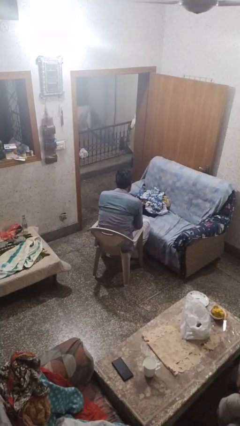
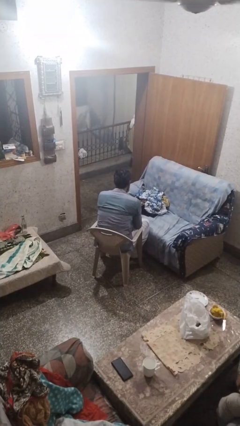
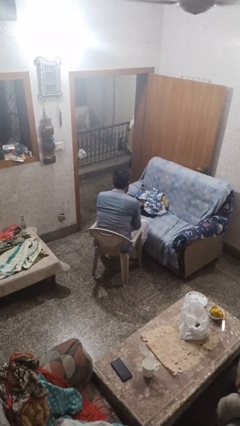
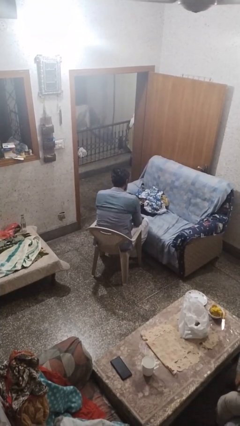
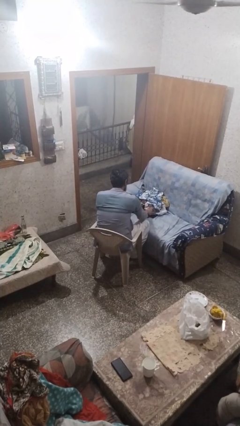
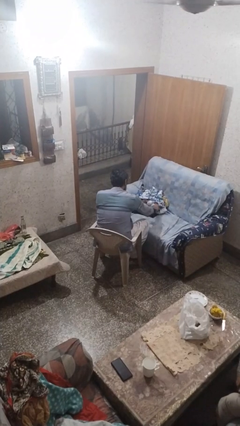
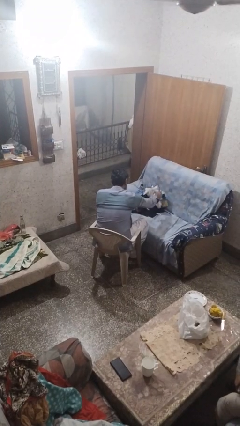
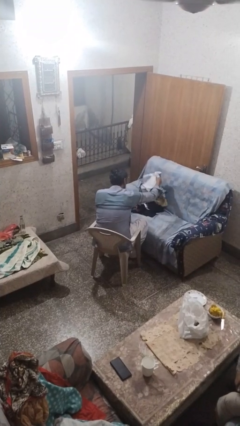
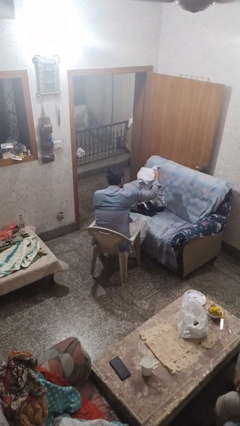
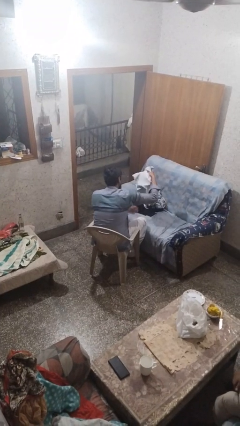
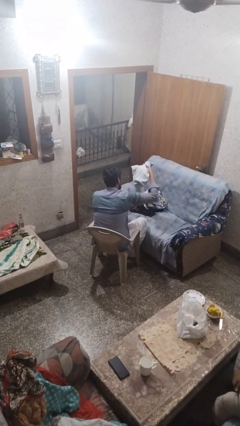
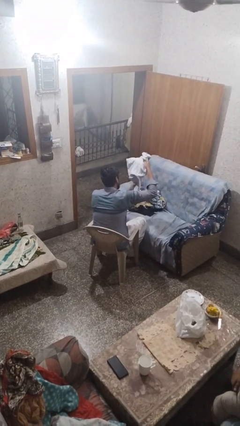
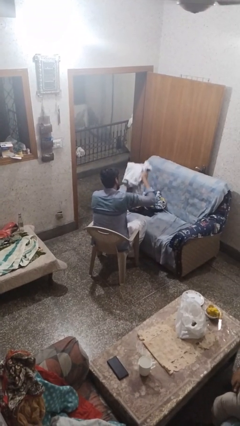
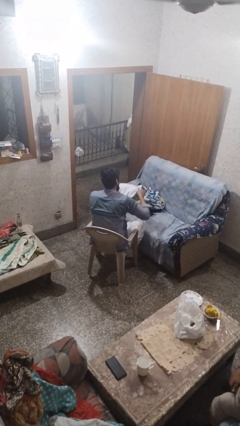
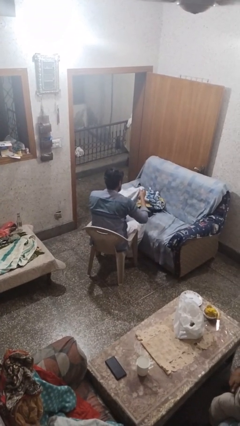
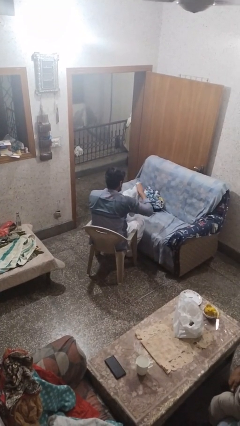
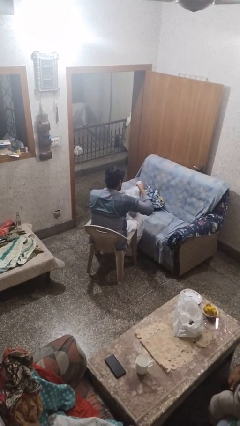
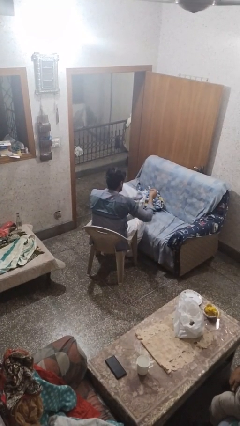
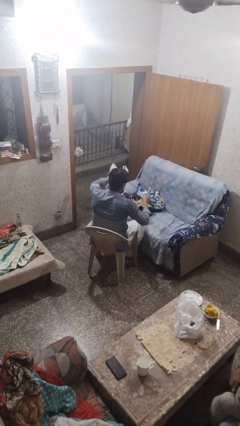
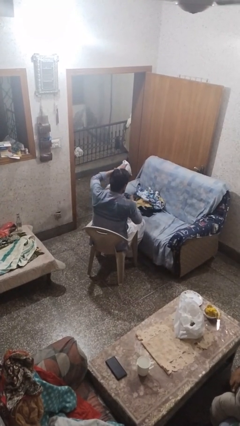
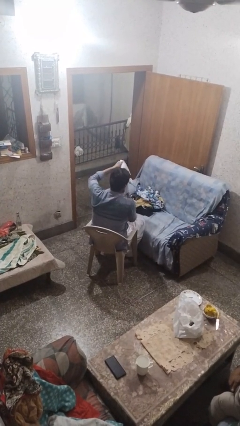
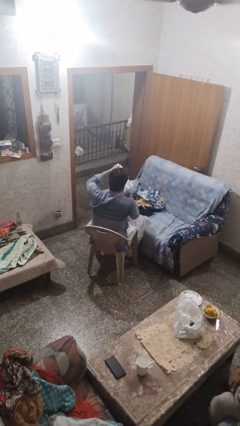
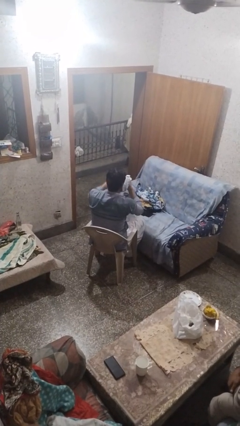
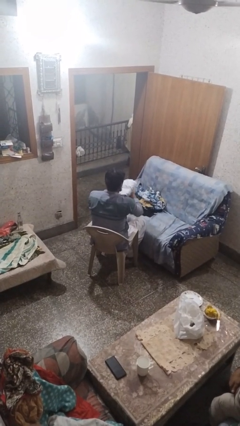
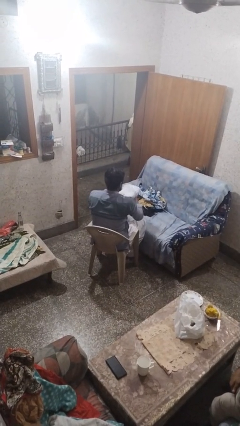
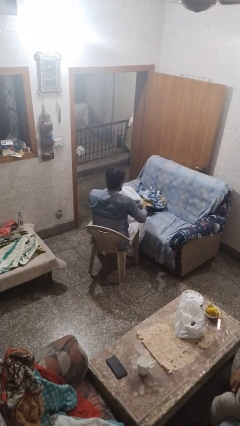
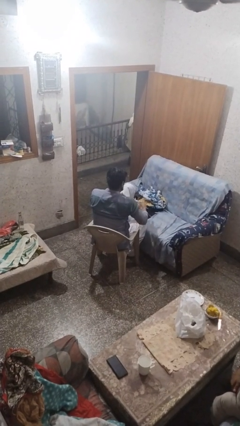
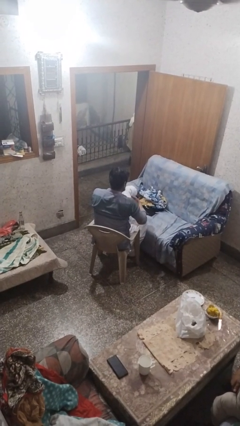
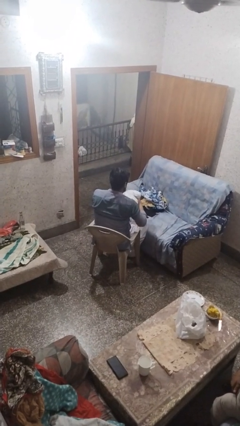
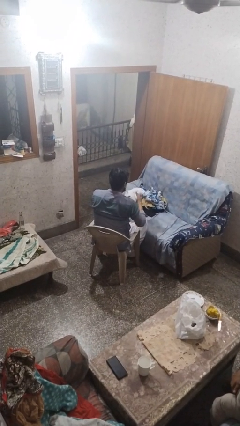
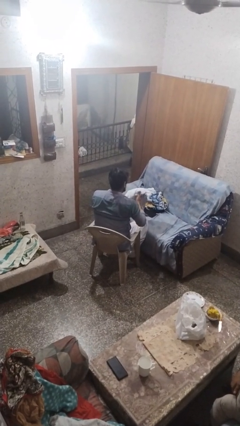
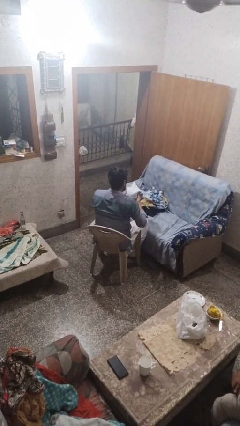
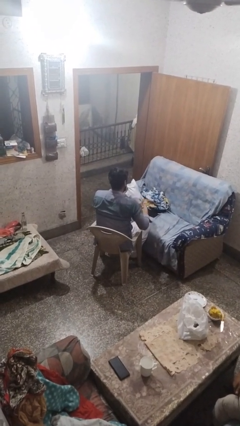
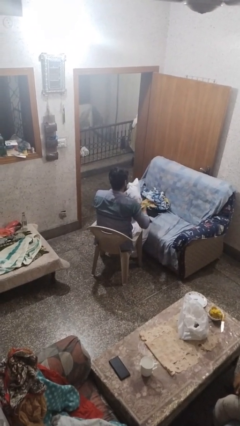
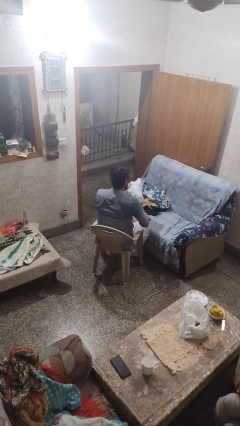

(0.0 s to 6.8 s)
person folds shirt

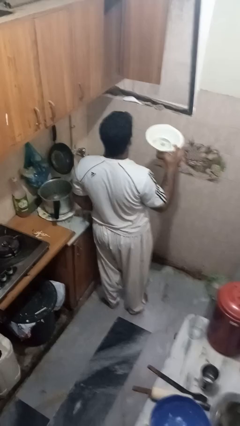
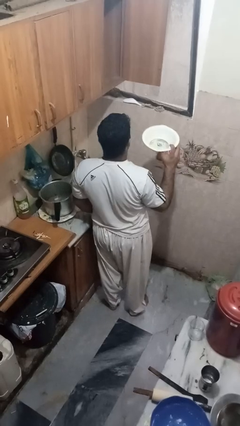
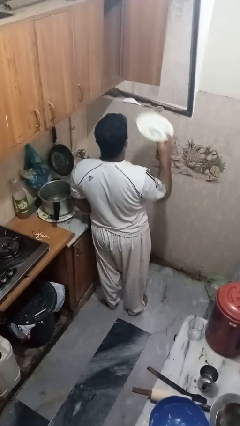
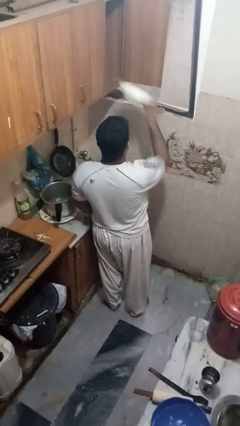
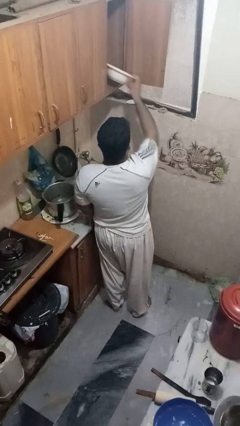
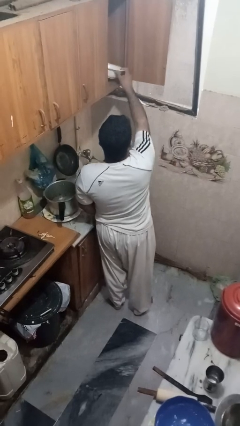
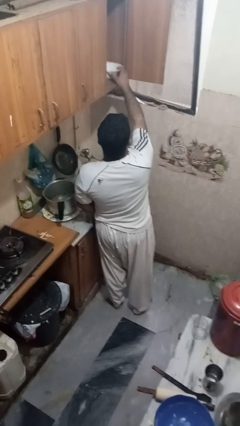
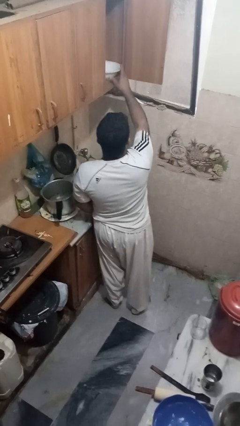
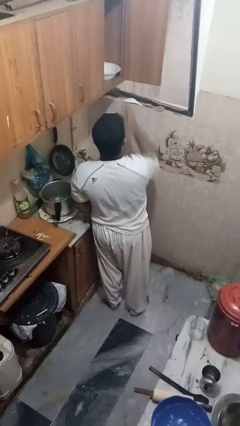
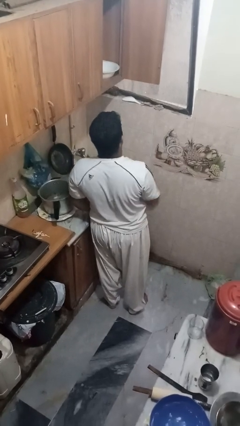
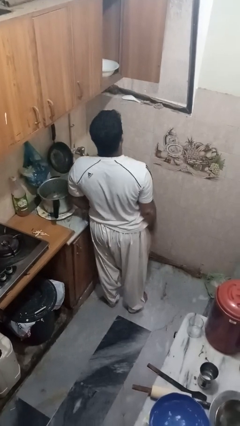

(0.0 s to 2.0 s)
person puts object in cabinet

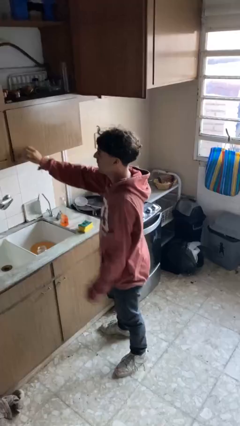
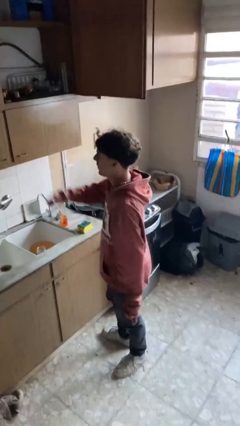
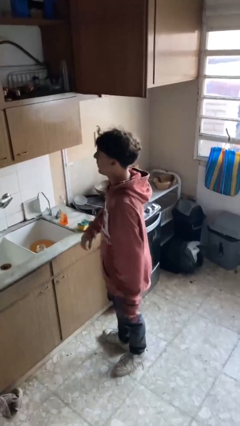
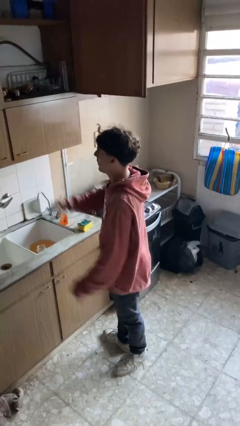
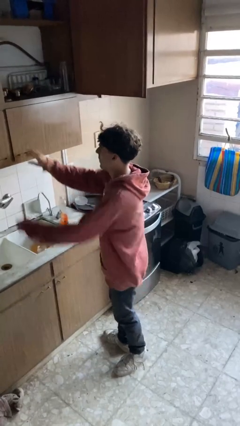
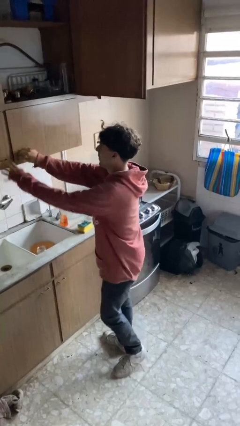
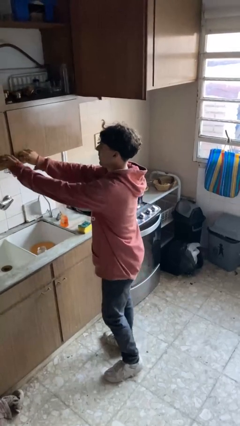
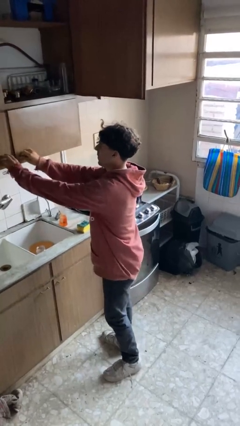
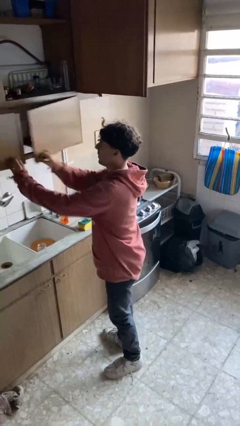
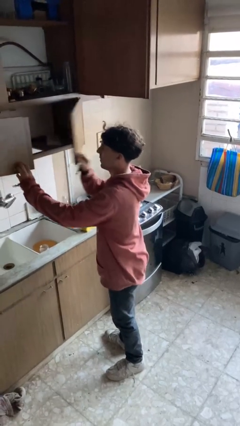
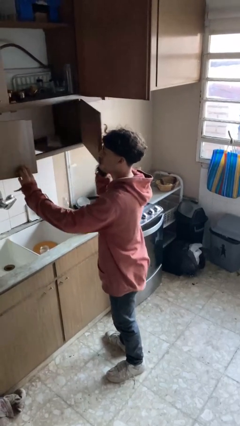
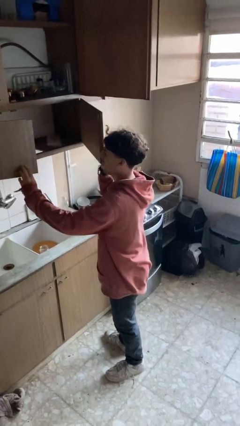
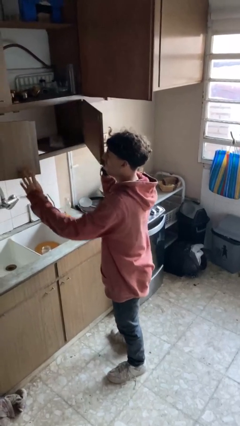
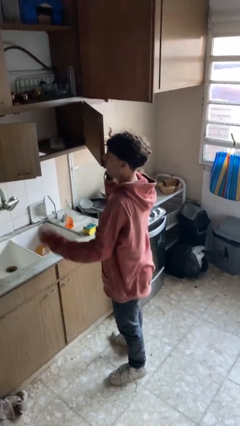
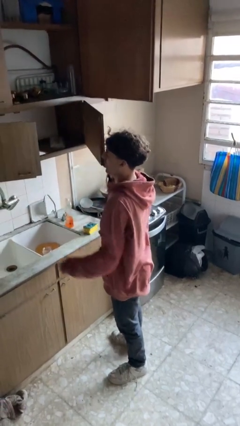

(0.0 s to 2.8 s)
person opens cabinet

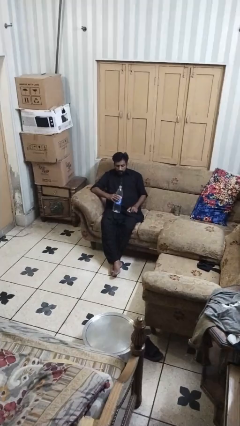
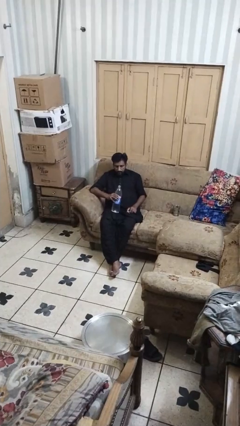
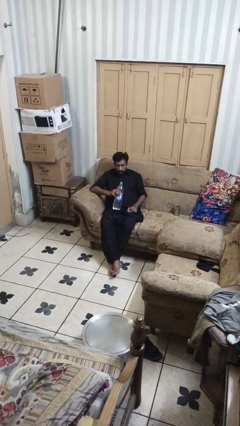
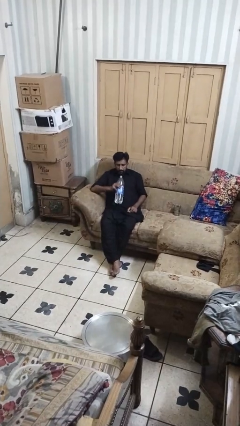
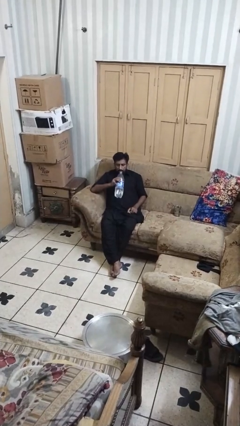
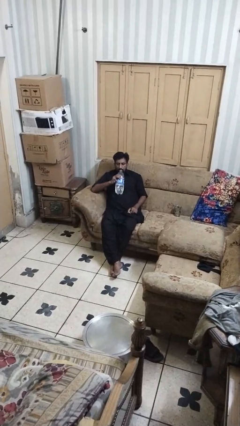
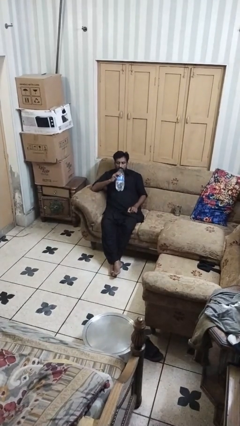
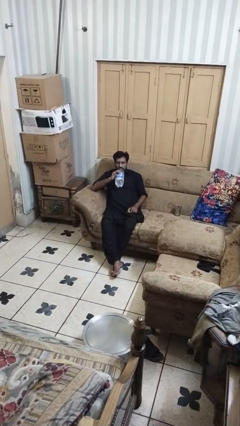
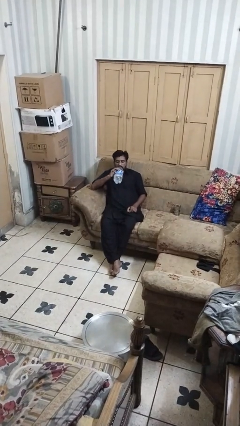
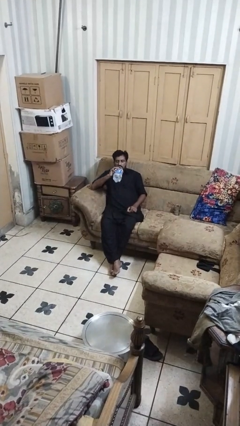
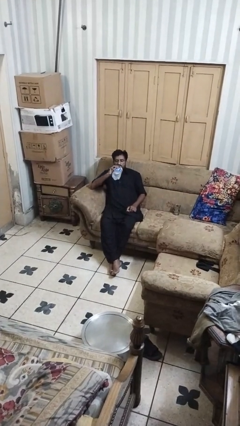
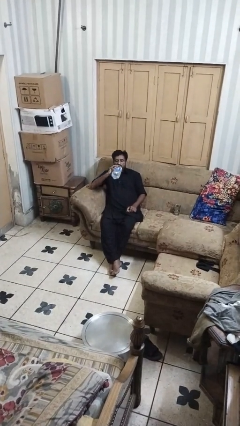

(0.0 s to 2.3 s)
person drinks from bottle

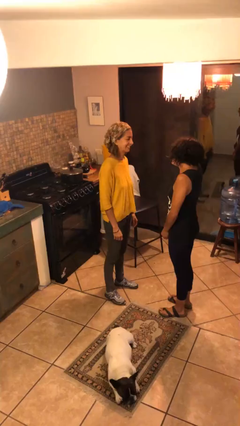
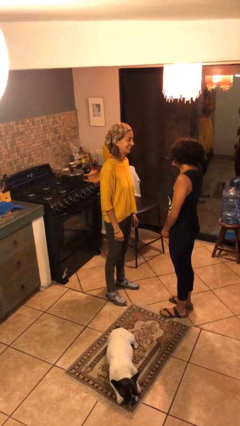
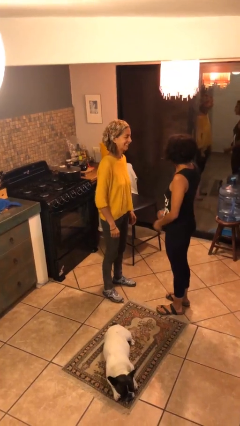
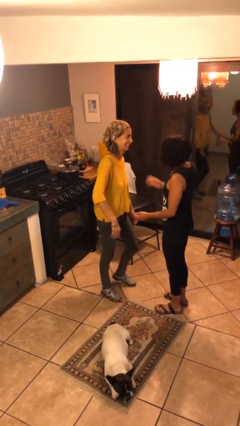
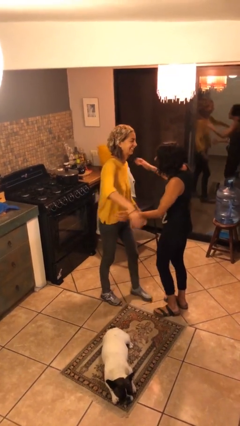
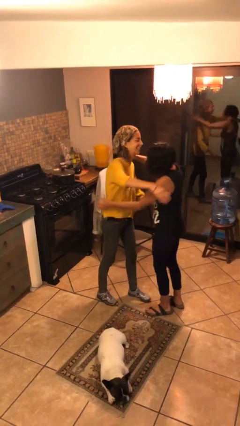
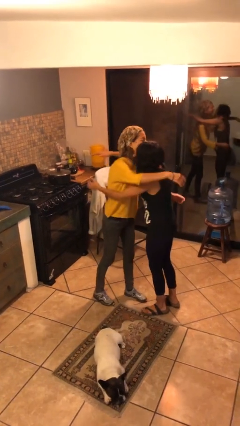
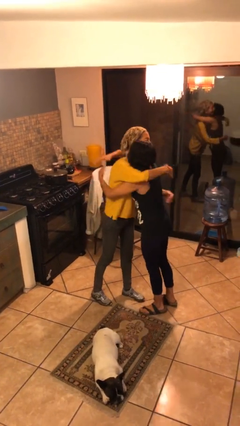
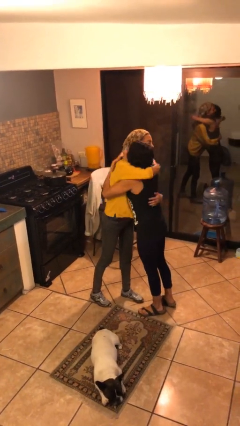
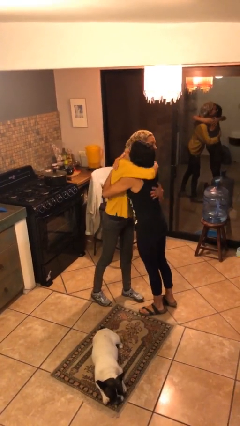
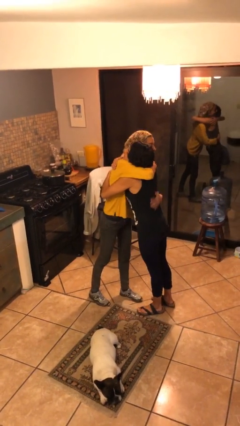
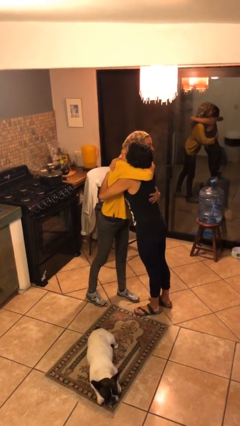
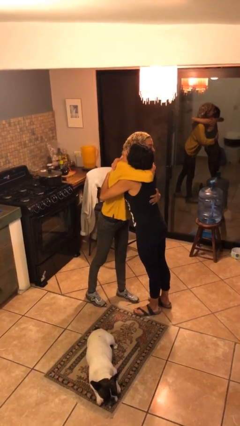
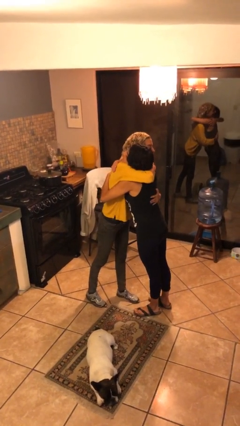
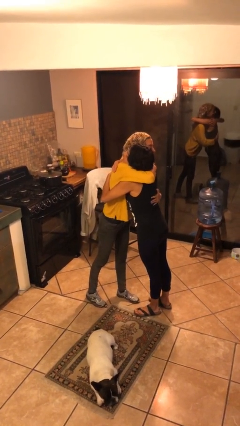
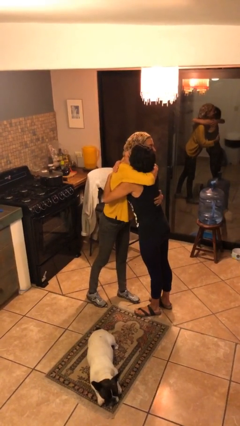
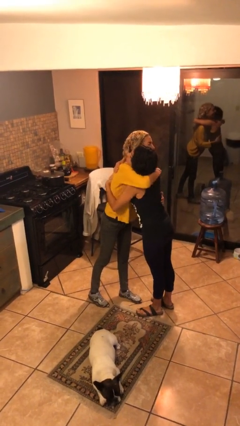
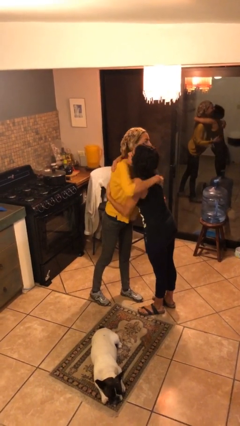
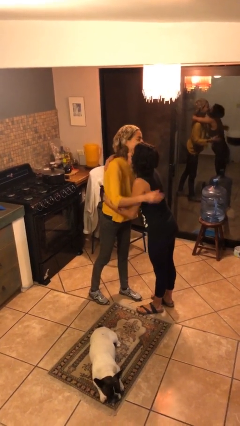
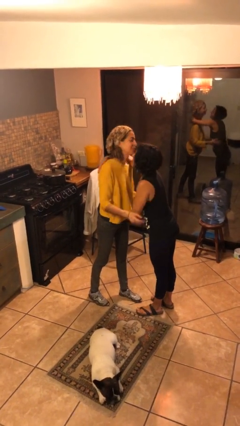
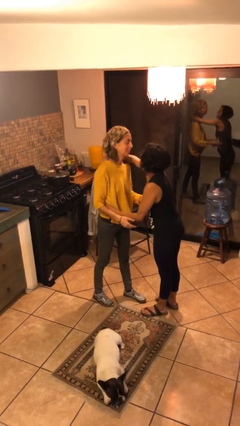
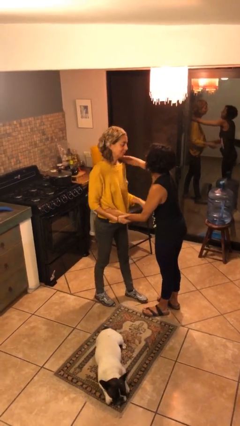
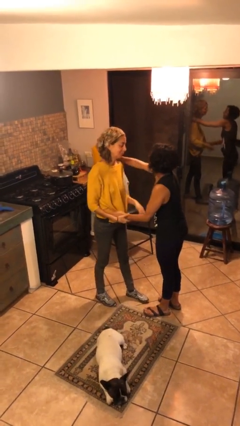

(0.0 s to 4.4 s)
person embraces person
